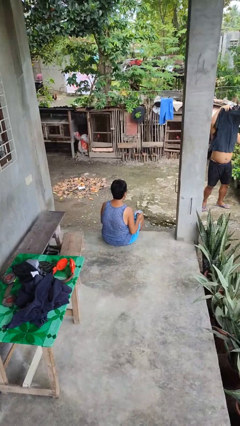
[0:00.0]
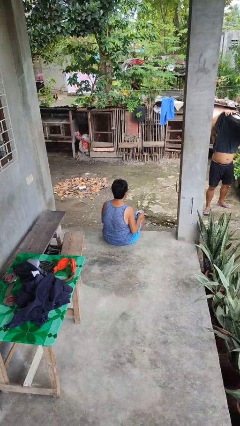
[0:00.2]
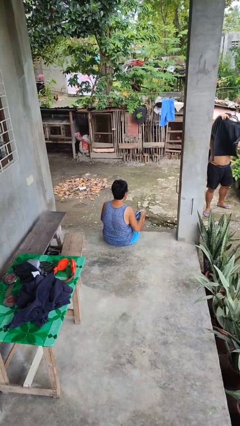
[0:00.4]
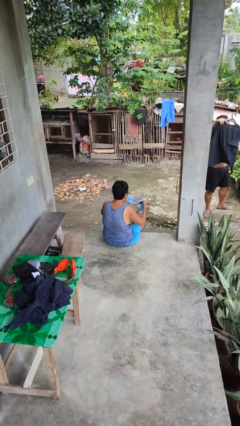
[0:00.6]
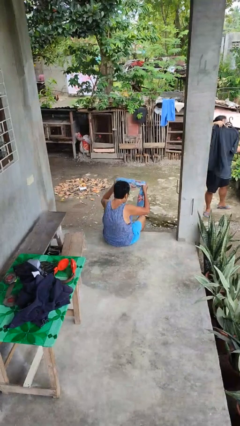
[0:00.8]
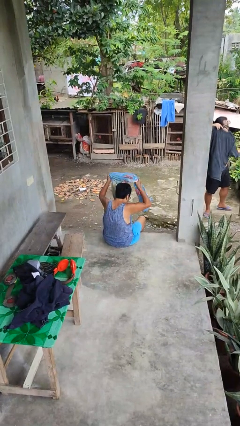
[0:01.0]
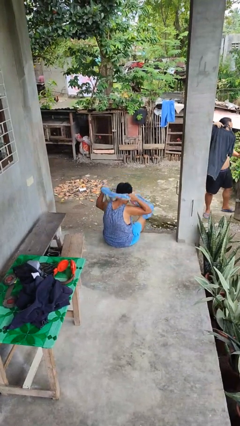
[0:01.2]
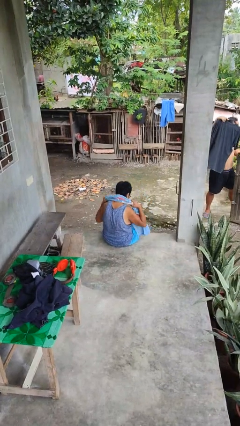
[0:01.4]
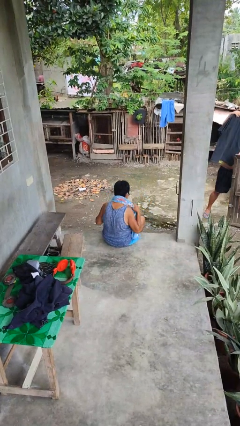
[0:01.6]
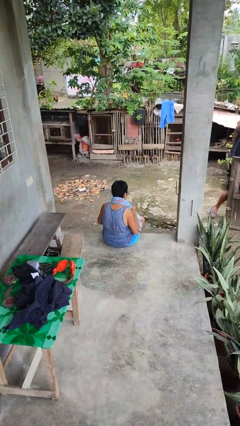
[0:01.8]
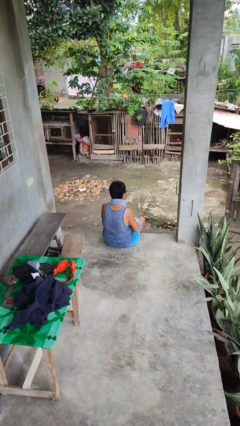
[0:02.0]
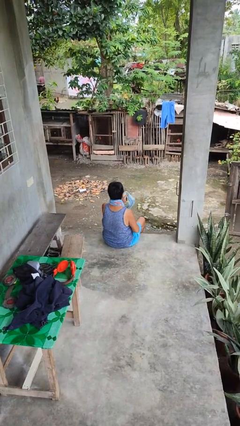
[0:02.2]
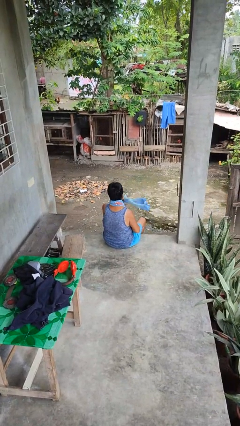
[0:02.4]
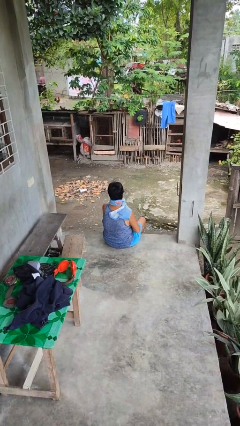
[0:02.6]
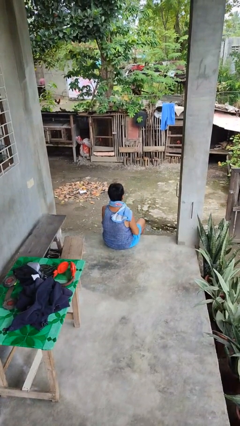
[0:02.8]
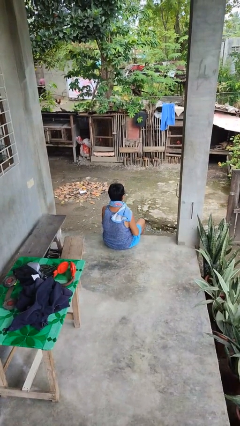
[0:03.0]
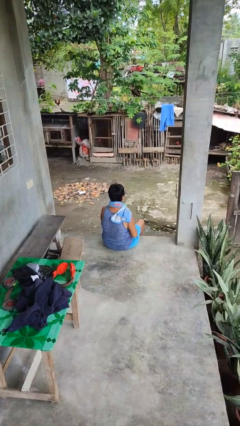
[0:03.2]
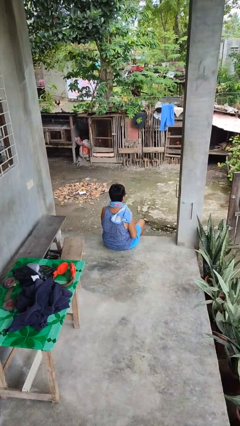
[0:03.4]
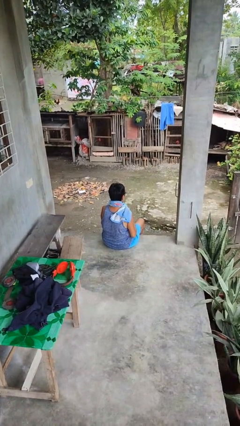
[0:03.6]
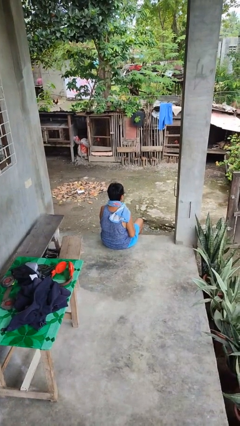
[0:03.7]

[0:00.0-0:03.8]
person puts on scarf

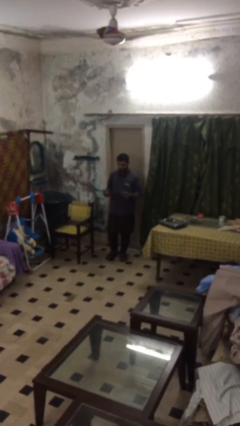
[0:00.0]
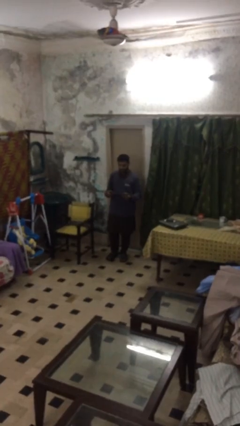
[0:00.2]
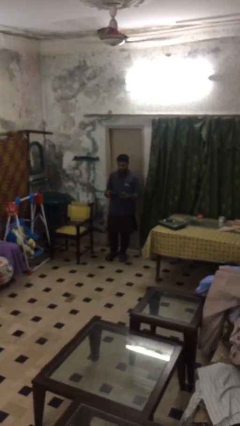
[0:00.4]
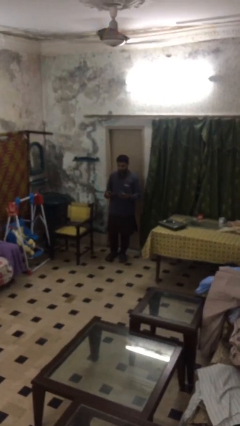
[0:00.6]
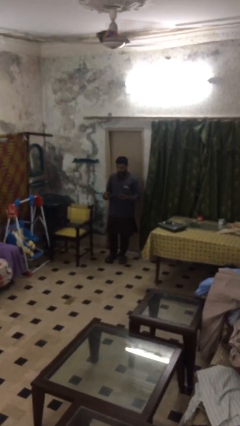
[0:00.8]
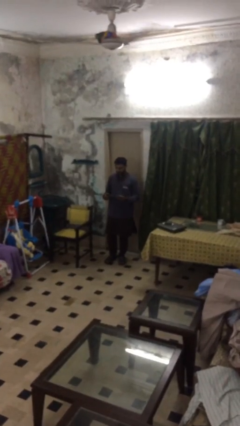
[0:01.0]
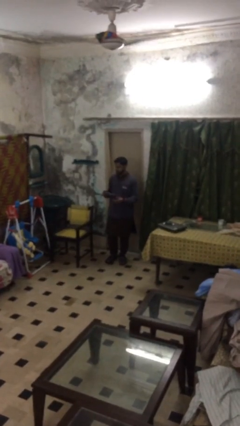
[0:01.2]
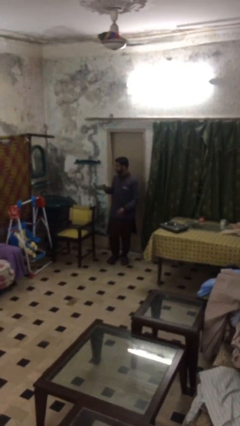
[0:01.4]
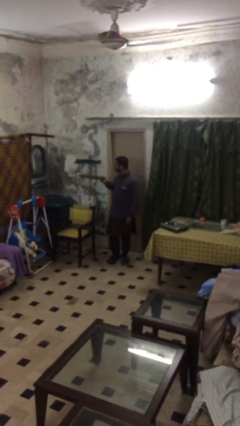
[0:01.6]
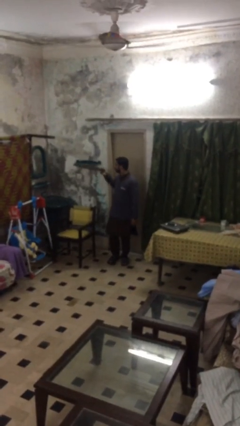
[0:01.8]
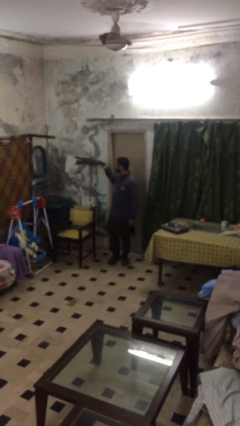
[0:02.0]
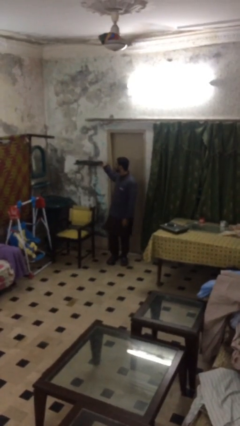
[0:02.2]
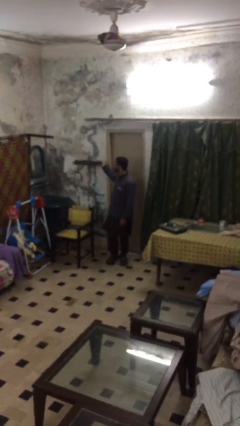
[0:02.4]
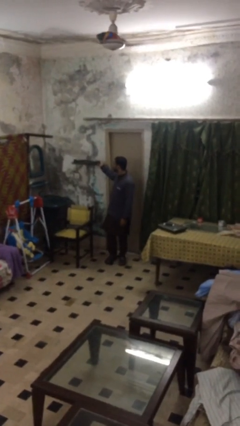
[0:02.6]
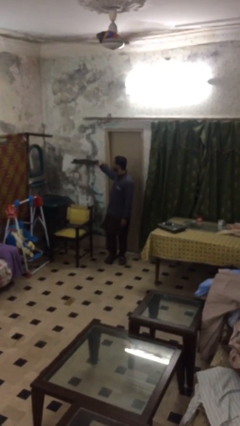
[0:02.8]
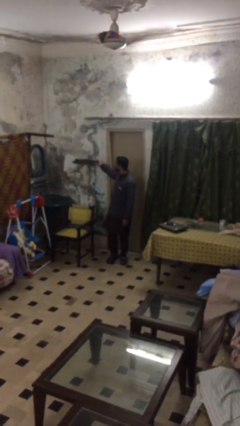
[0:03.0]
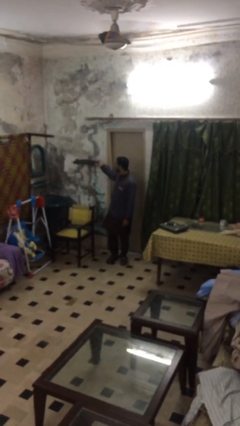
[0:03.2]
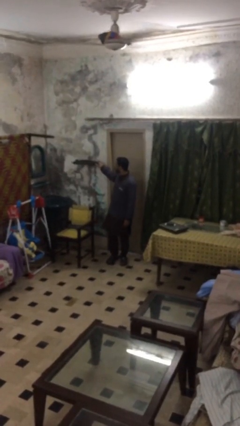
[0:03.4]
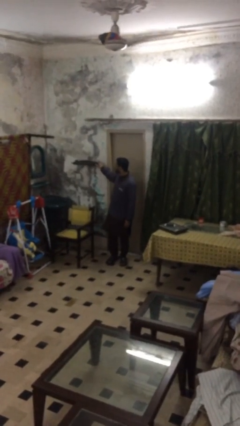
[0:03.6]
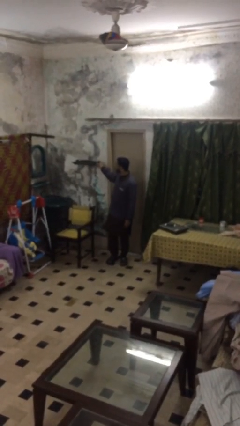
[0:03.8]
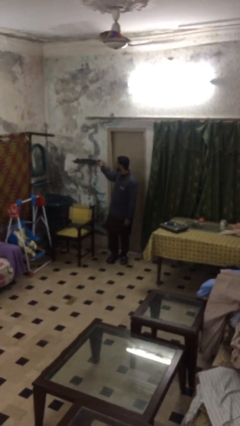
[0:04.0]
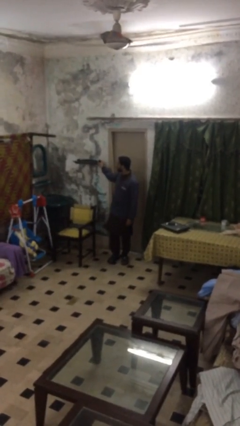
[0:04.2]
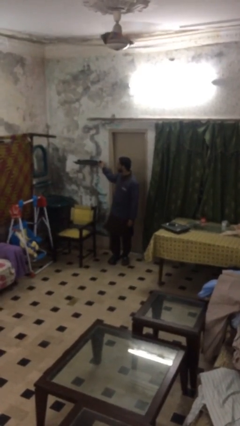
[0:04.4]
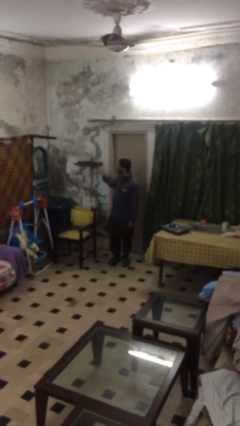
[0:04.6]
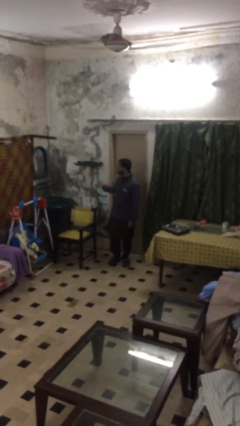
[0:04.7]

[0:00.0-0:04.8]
person puts down object on shelf

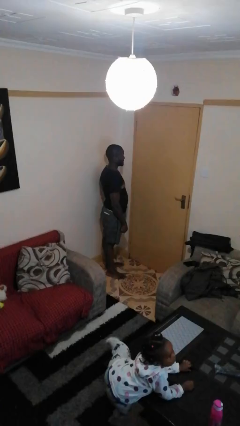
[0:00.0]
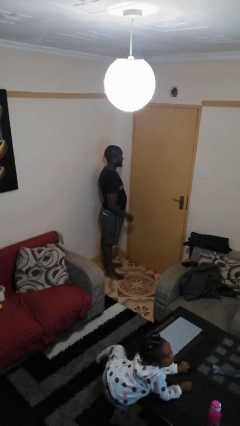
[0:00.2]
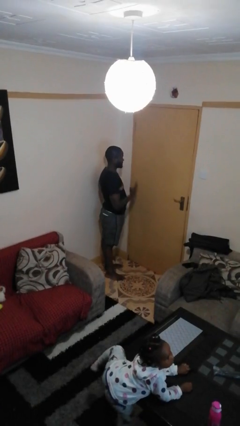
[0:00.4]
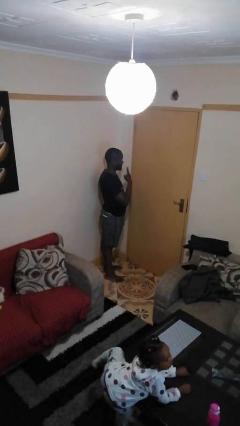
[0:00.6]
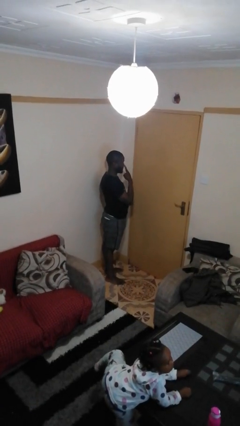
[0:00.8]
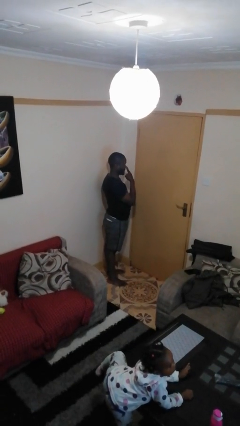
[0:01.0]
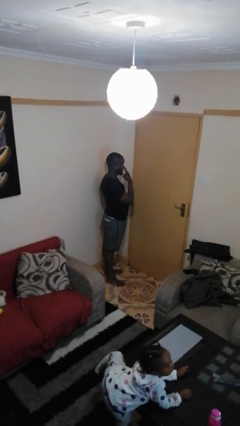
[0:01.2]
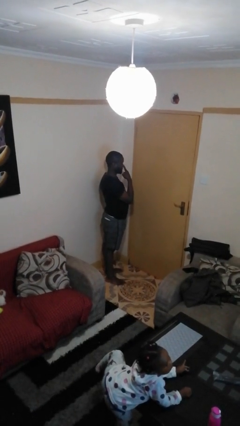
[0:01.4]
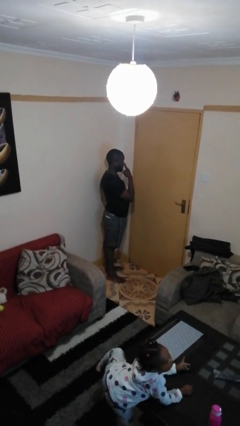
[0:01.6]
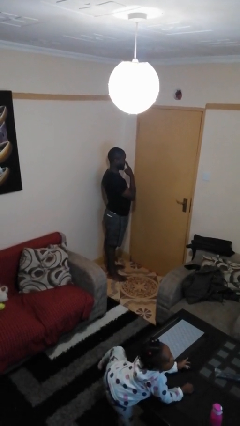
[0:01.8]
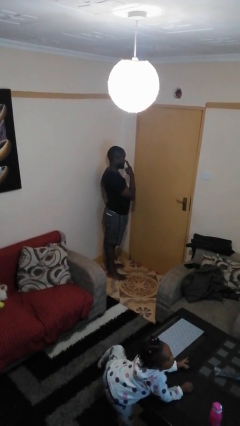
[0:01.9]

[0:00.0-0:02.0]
person gestures watch closely

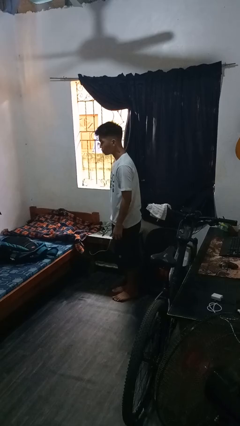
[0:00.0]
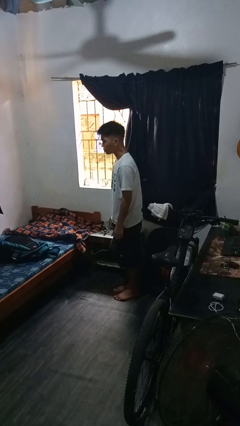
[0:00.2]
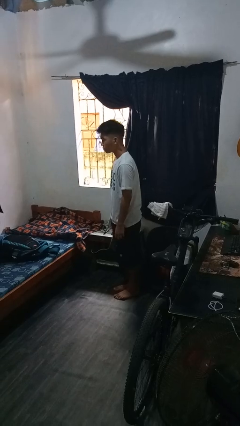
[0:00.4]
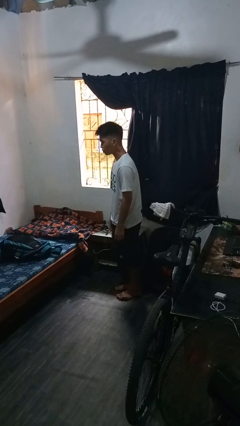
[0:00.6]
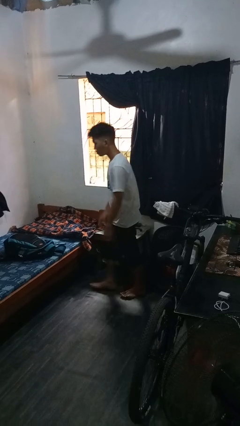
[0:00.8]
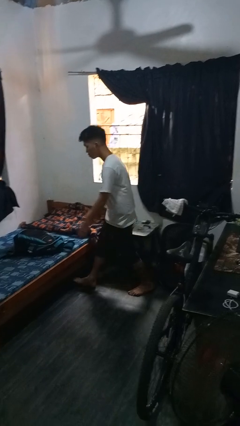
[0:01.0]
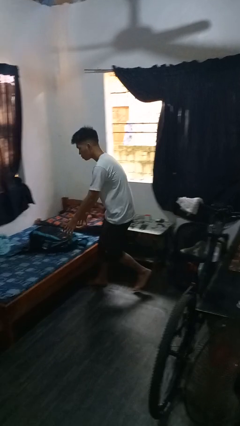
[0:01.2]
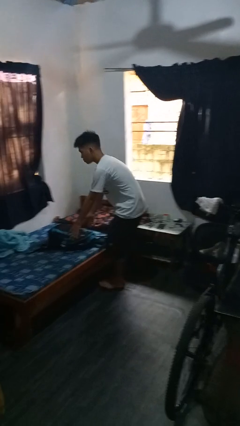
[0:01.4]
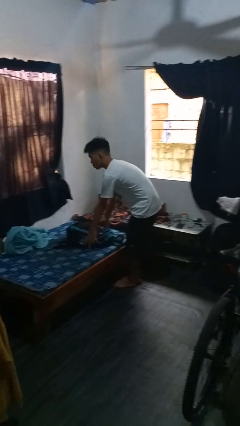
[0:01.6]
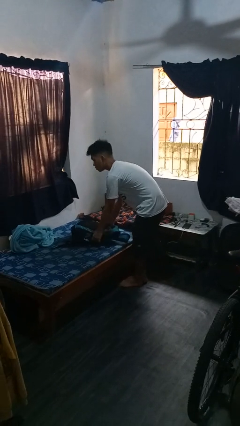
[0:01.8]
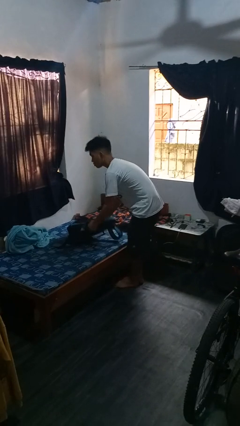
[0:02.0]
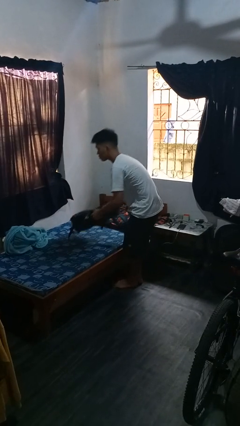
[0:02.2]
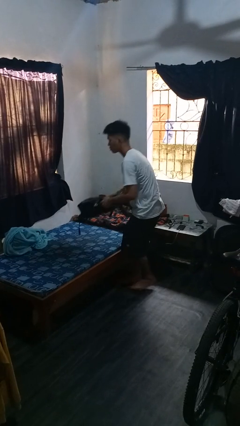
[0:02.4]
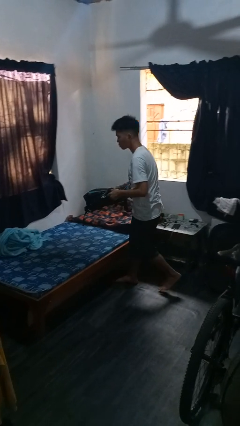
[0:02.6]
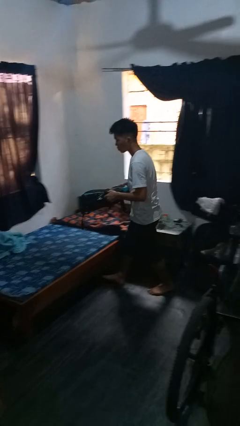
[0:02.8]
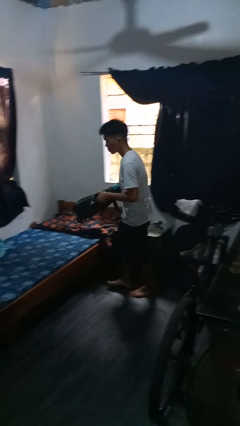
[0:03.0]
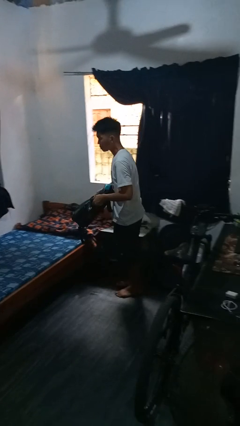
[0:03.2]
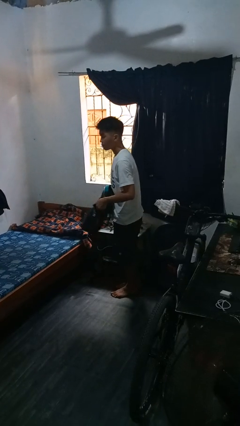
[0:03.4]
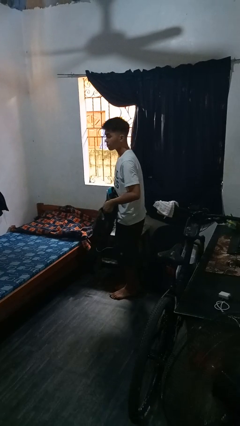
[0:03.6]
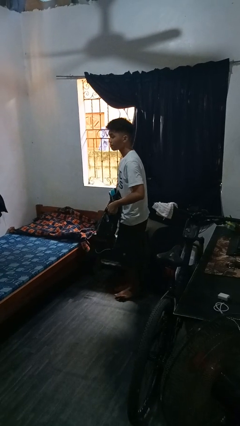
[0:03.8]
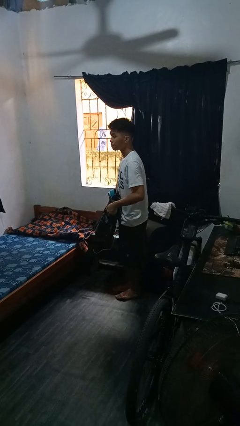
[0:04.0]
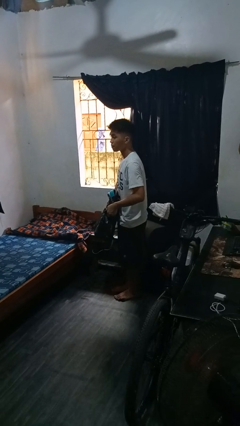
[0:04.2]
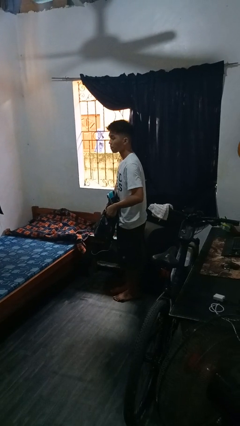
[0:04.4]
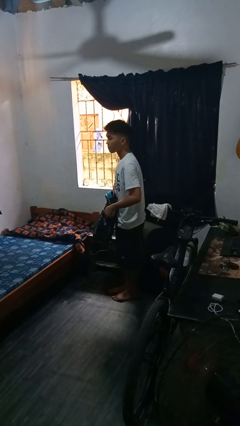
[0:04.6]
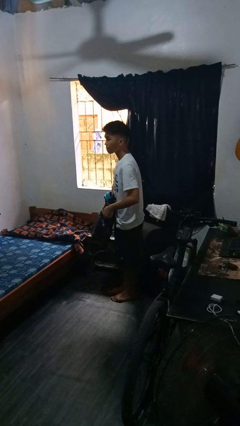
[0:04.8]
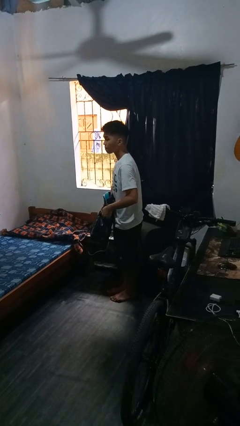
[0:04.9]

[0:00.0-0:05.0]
person picks up object from bed

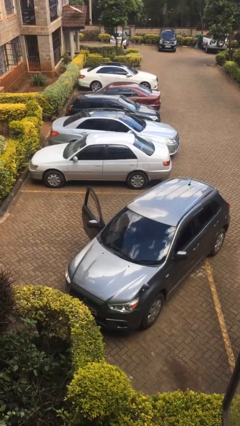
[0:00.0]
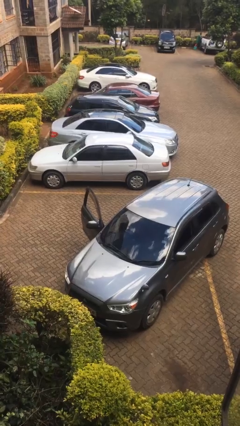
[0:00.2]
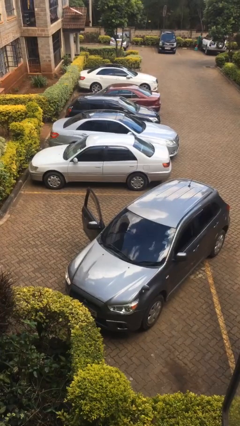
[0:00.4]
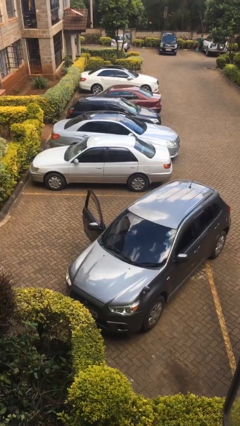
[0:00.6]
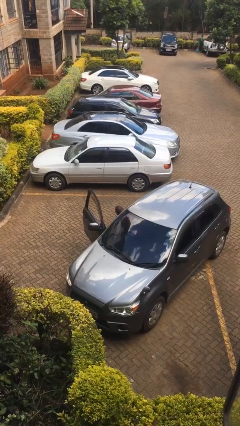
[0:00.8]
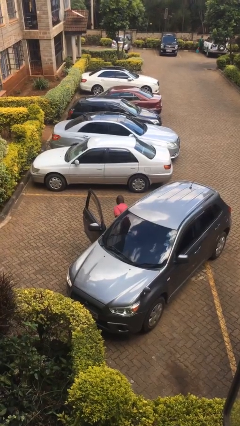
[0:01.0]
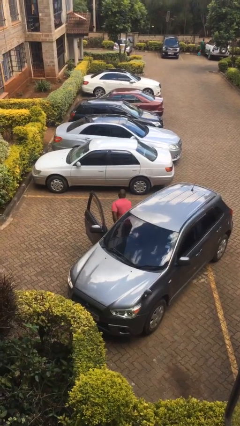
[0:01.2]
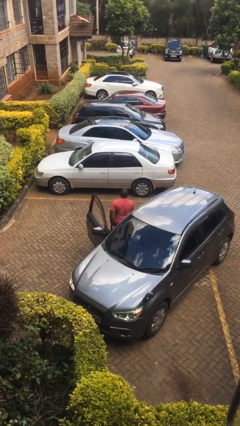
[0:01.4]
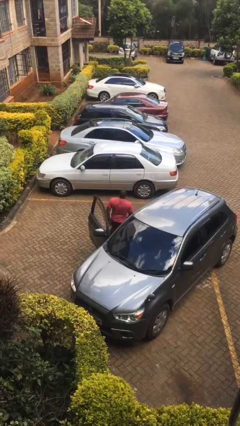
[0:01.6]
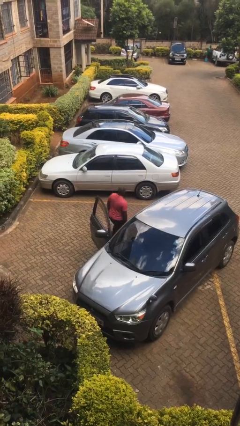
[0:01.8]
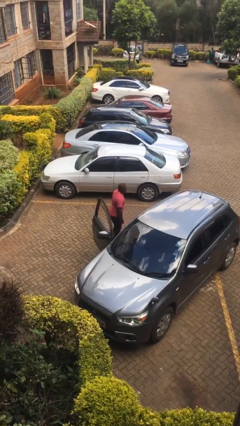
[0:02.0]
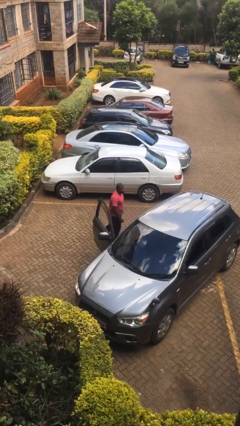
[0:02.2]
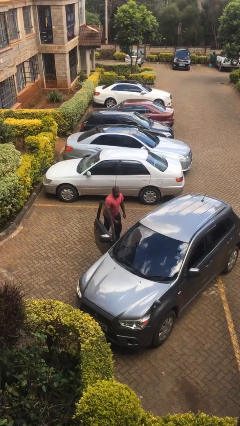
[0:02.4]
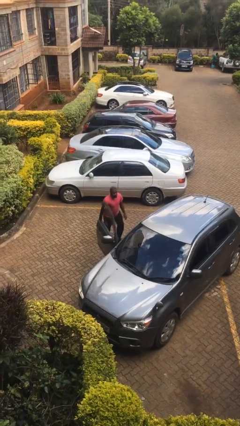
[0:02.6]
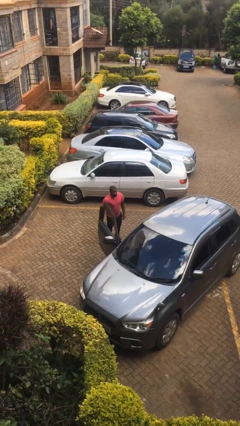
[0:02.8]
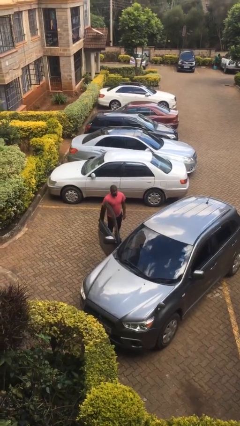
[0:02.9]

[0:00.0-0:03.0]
person exits car
